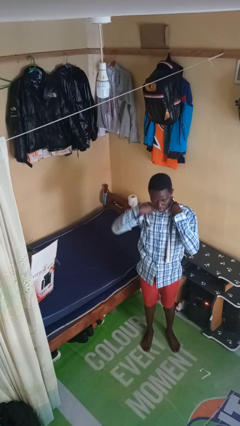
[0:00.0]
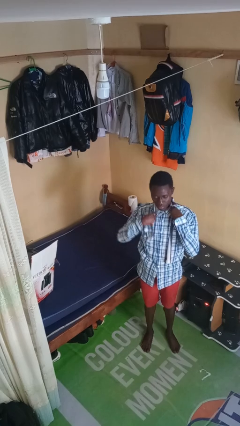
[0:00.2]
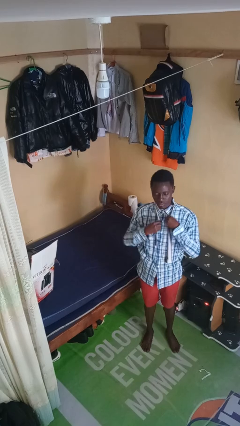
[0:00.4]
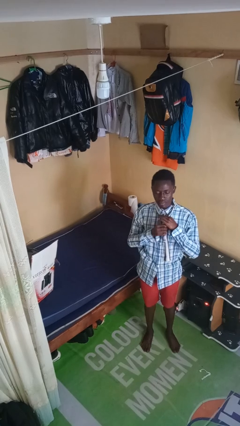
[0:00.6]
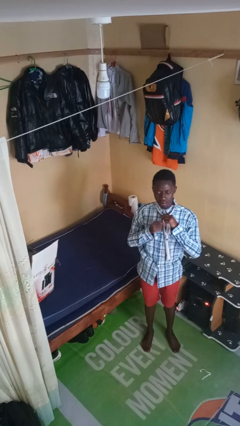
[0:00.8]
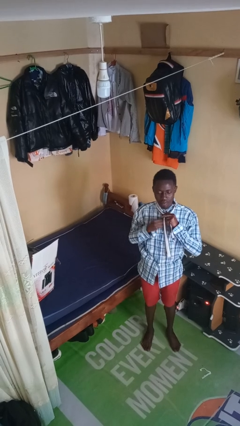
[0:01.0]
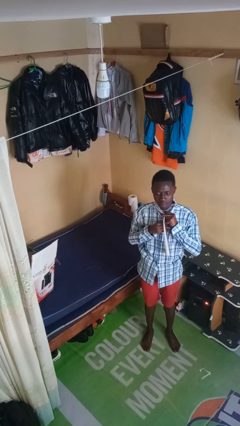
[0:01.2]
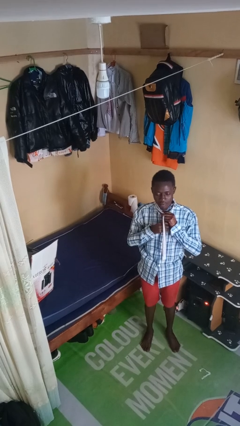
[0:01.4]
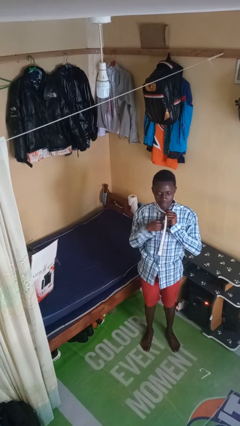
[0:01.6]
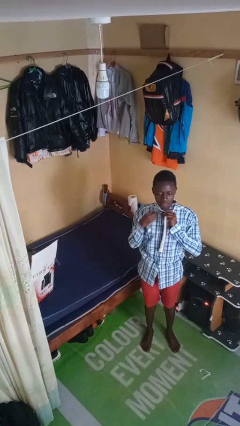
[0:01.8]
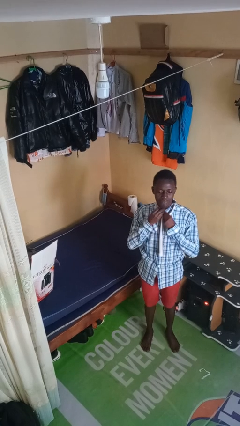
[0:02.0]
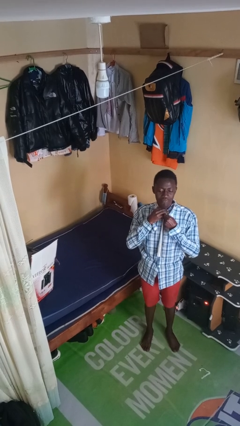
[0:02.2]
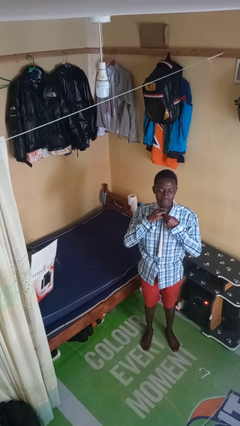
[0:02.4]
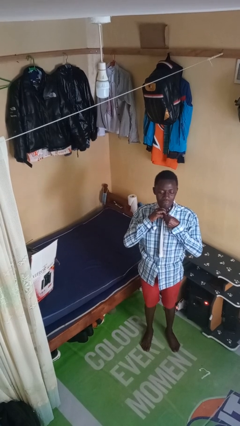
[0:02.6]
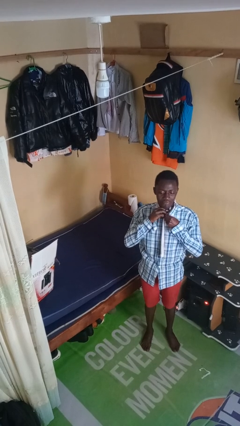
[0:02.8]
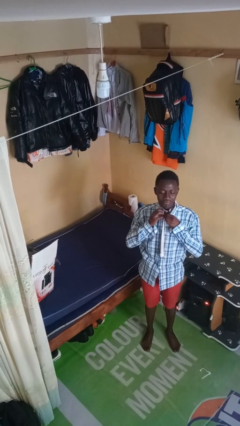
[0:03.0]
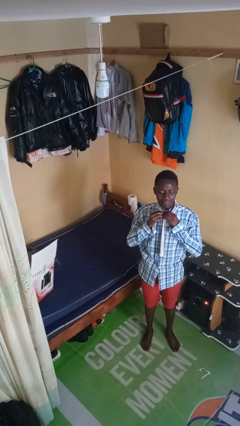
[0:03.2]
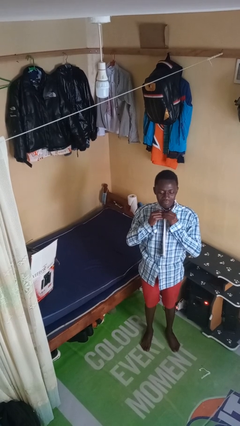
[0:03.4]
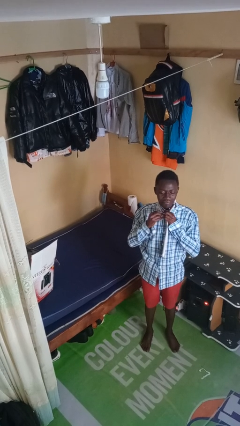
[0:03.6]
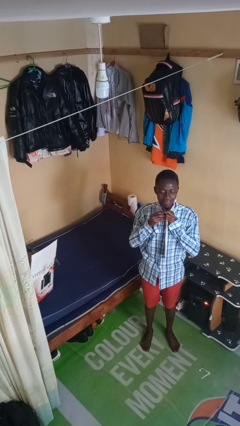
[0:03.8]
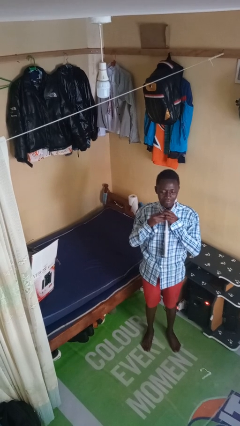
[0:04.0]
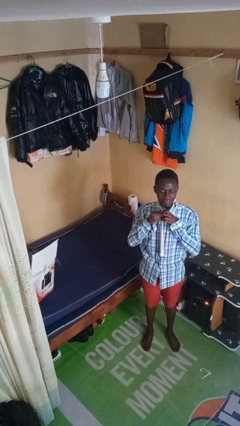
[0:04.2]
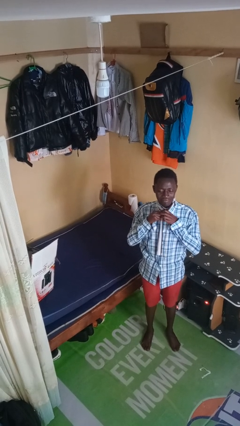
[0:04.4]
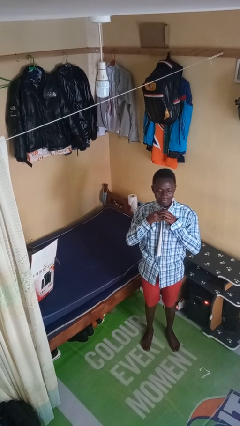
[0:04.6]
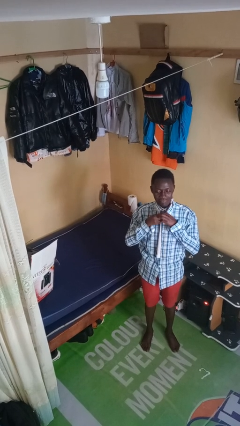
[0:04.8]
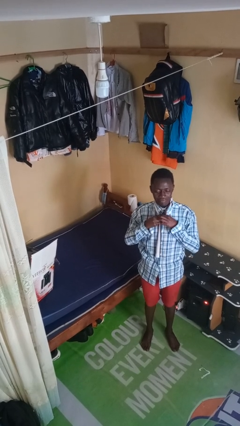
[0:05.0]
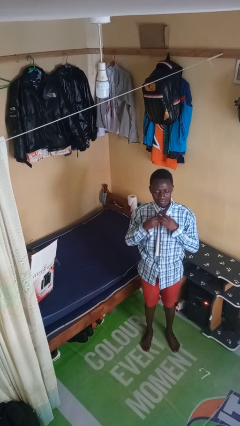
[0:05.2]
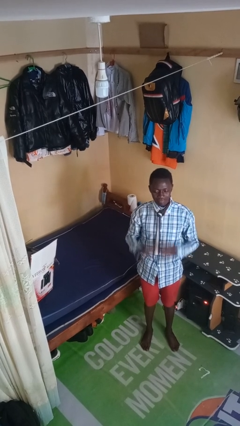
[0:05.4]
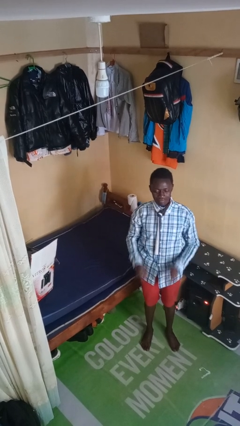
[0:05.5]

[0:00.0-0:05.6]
person puts on necktie

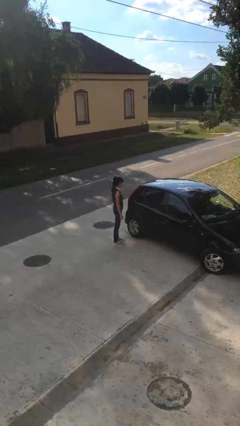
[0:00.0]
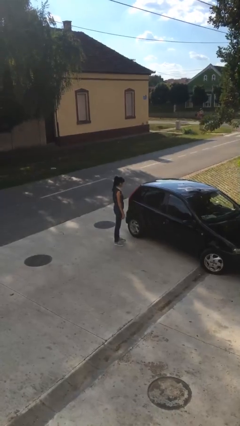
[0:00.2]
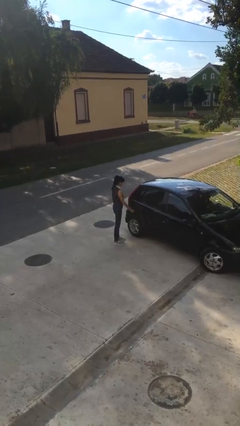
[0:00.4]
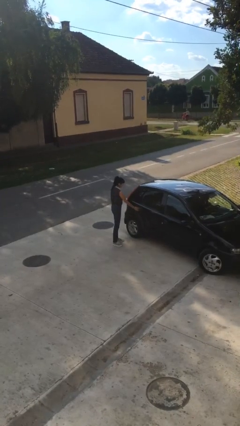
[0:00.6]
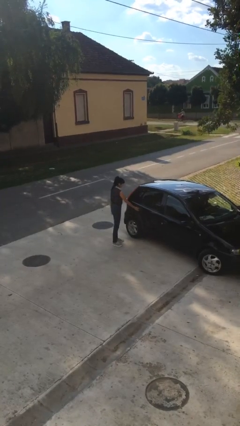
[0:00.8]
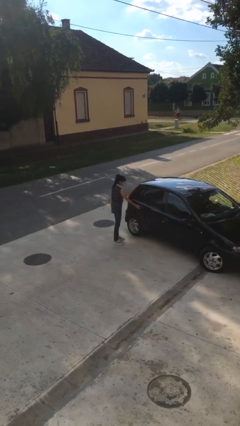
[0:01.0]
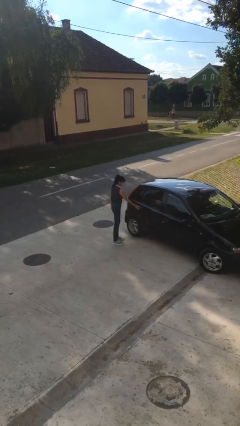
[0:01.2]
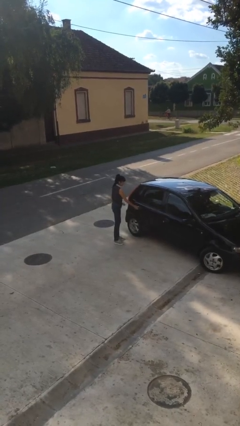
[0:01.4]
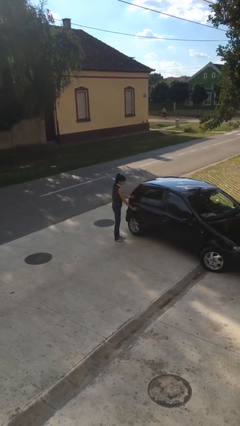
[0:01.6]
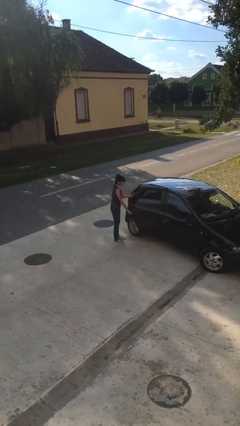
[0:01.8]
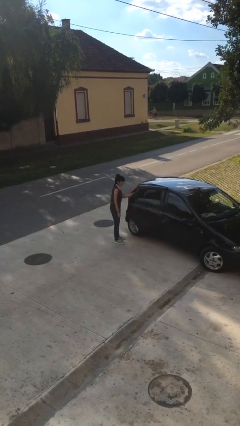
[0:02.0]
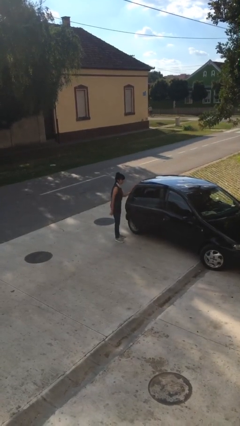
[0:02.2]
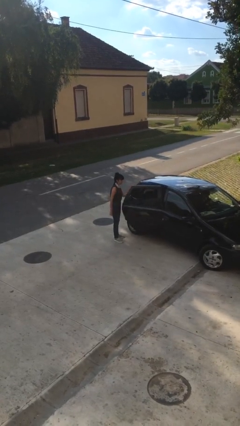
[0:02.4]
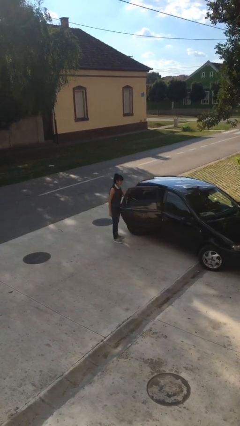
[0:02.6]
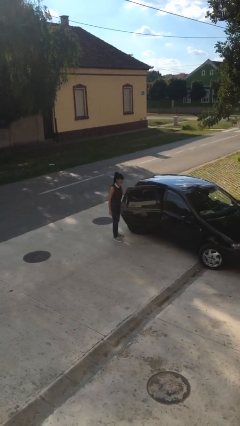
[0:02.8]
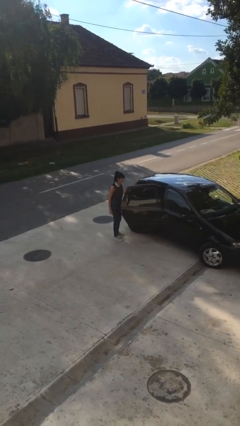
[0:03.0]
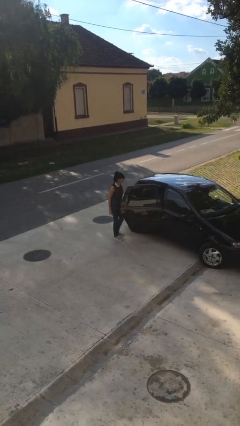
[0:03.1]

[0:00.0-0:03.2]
person opens car door

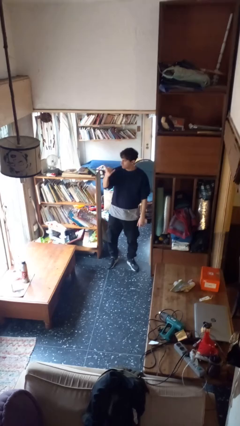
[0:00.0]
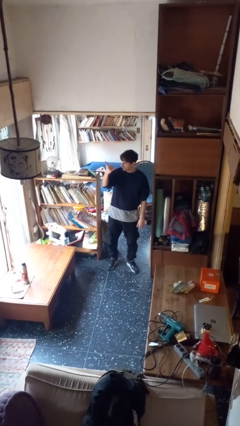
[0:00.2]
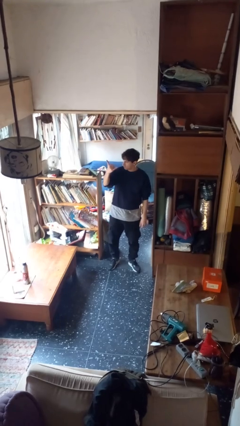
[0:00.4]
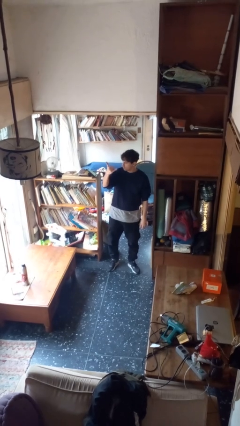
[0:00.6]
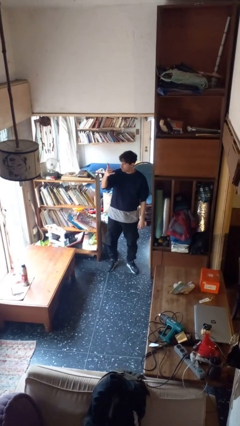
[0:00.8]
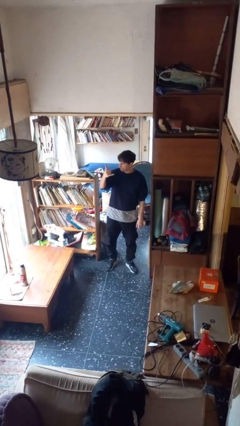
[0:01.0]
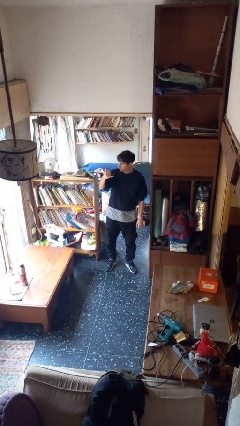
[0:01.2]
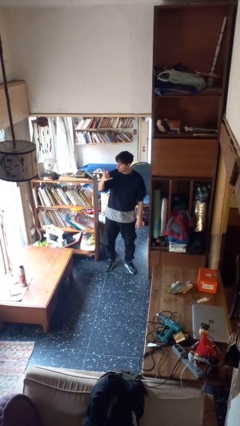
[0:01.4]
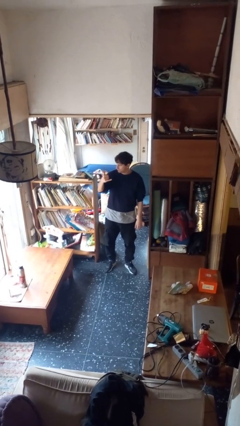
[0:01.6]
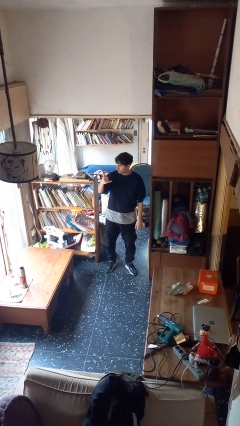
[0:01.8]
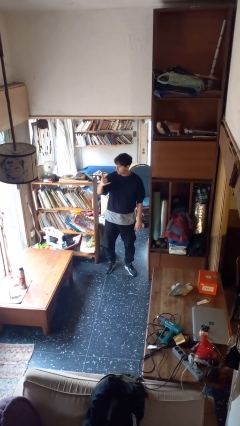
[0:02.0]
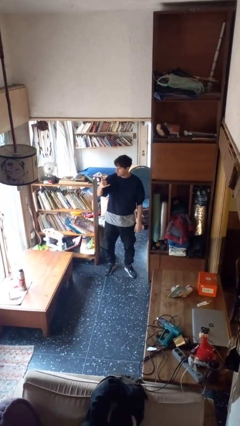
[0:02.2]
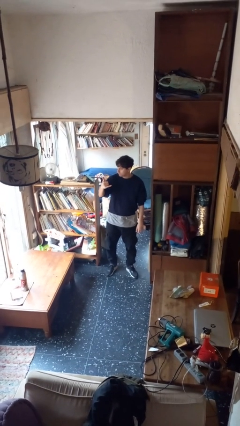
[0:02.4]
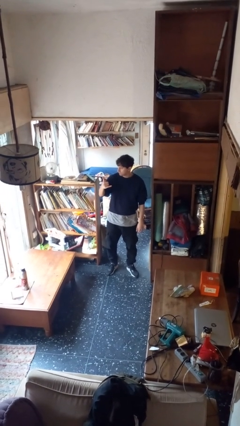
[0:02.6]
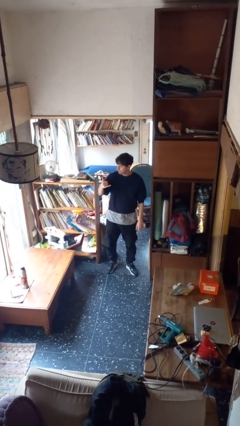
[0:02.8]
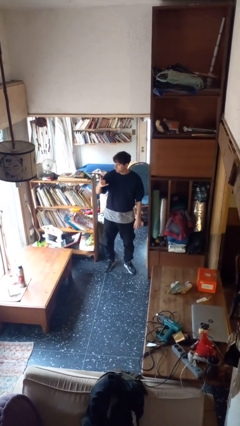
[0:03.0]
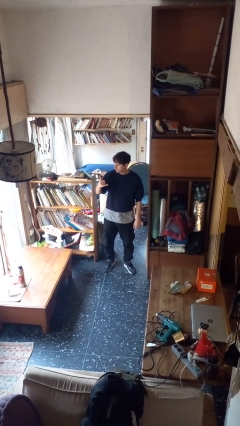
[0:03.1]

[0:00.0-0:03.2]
person gestures hang loose

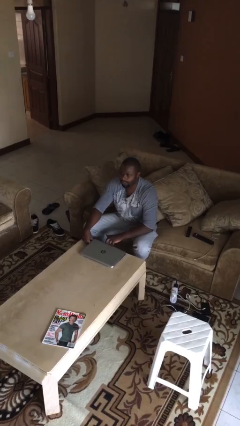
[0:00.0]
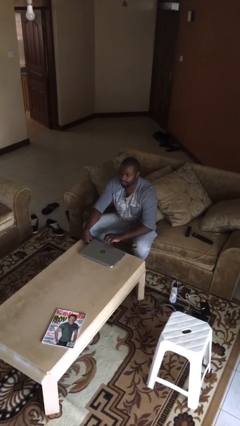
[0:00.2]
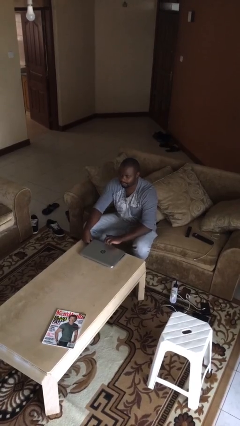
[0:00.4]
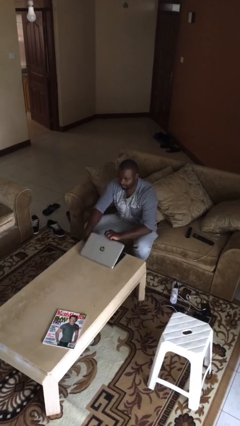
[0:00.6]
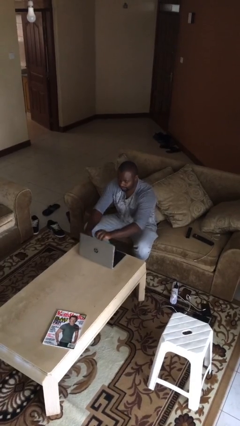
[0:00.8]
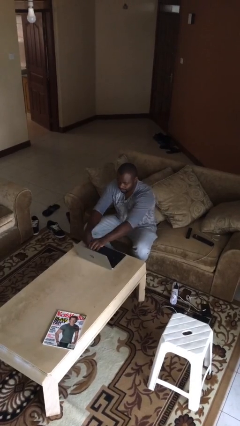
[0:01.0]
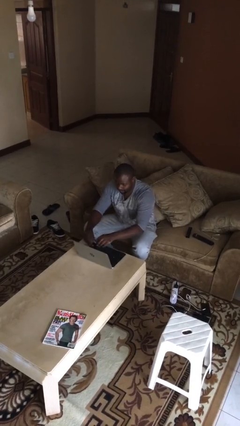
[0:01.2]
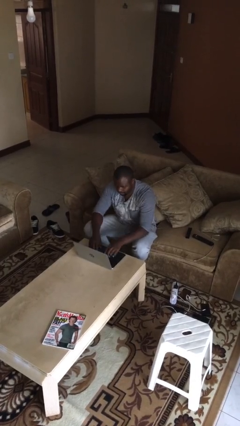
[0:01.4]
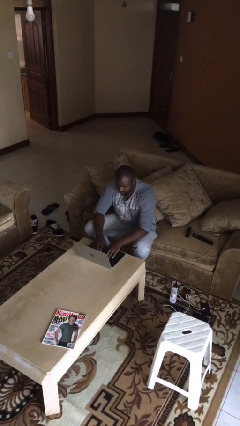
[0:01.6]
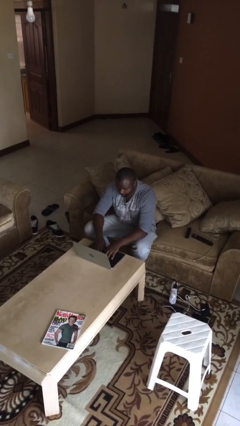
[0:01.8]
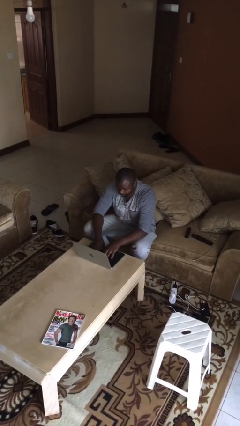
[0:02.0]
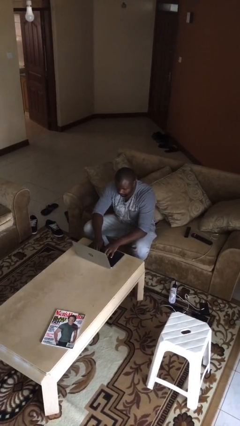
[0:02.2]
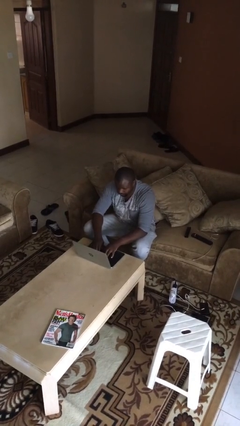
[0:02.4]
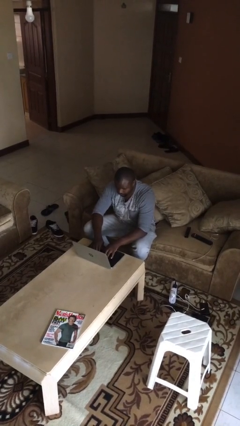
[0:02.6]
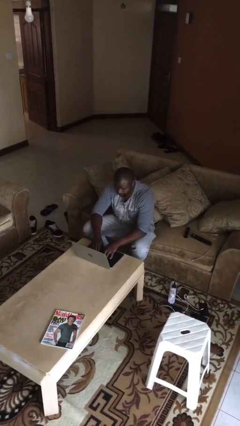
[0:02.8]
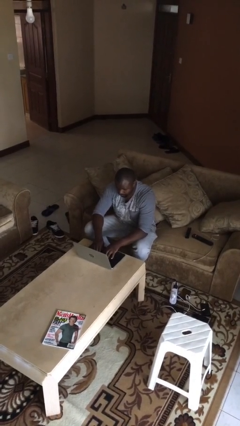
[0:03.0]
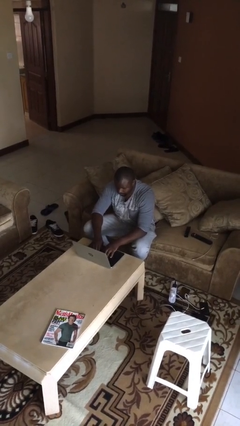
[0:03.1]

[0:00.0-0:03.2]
person interacts with laptop

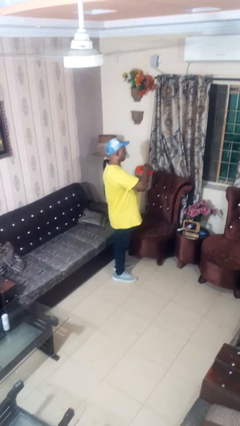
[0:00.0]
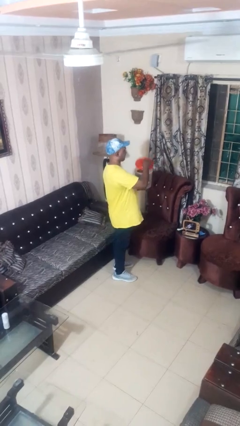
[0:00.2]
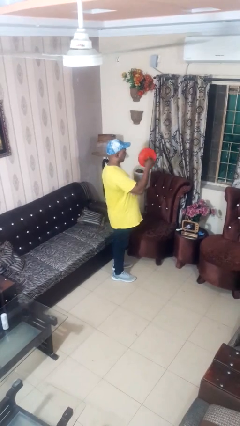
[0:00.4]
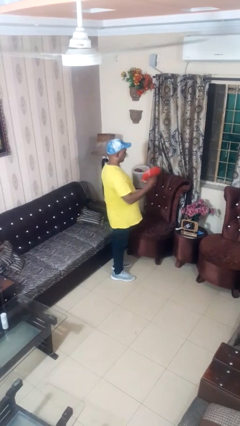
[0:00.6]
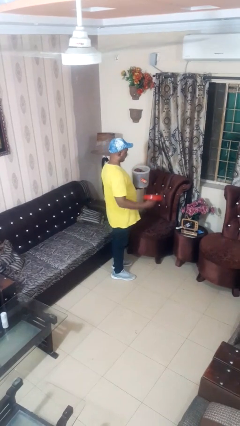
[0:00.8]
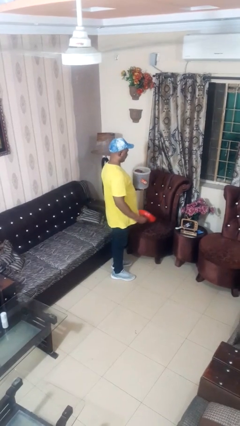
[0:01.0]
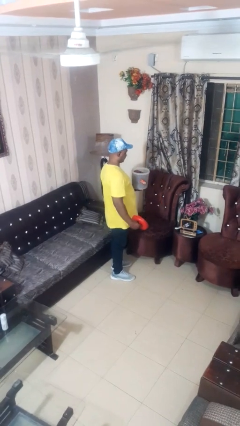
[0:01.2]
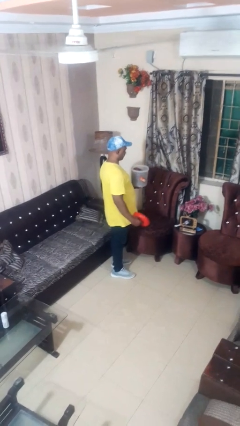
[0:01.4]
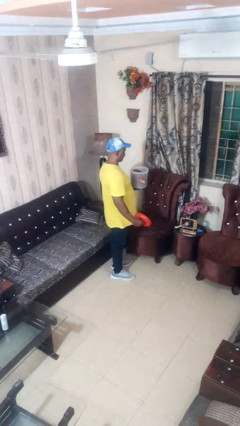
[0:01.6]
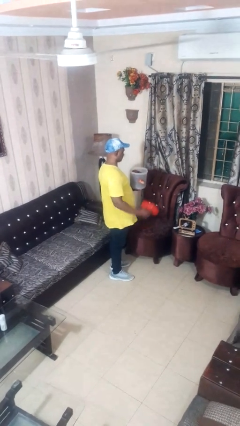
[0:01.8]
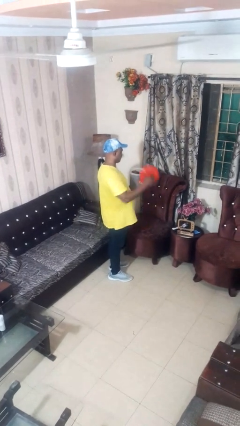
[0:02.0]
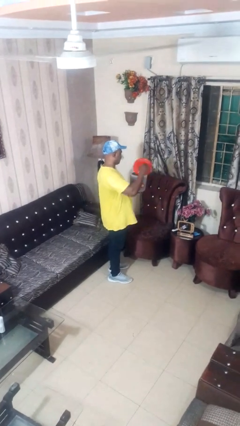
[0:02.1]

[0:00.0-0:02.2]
person opens jar
